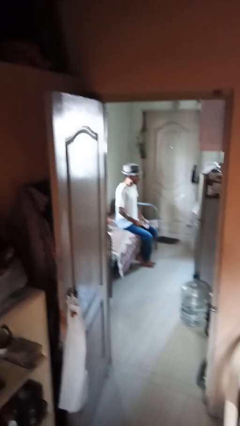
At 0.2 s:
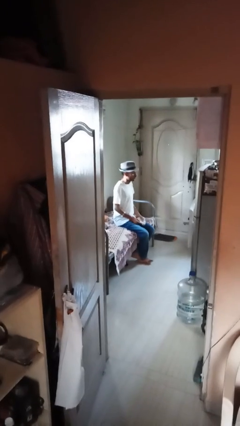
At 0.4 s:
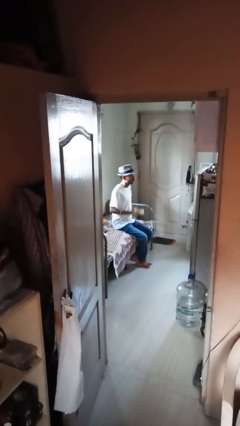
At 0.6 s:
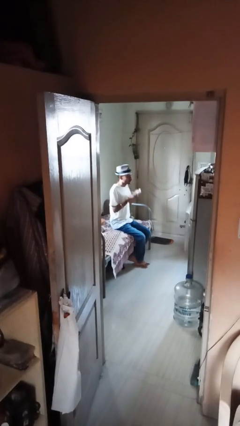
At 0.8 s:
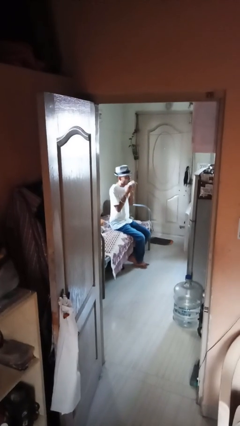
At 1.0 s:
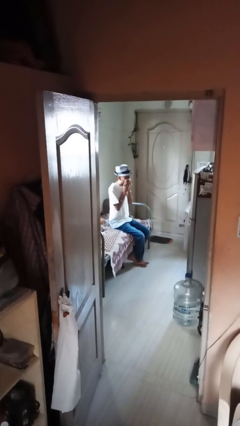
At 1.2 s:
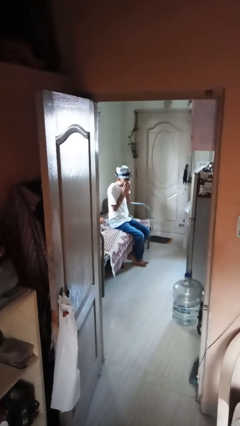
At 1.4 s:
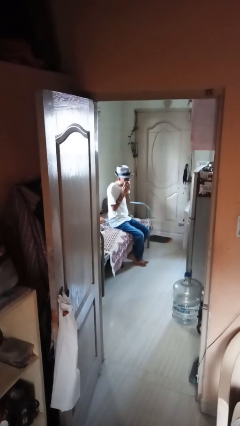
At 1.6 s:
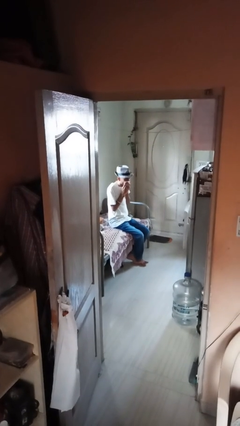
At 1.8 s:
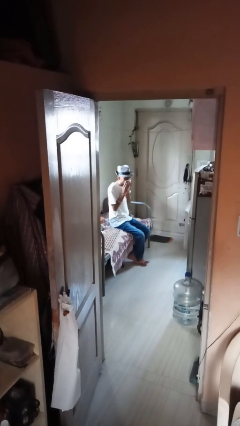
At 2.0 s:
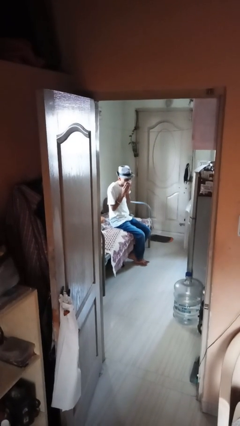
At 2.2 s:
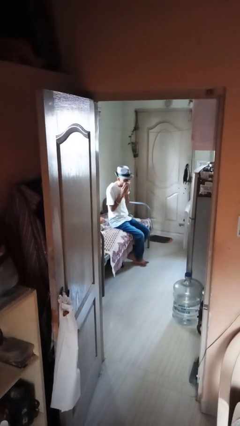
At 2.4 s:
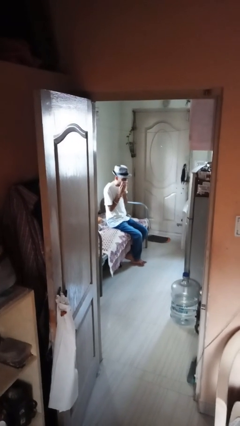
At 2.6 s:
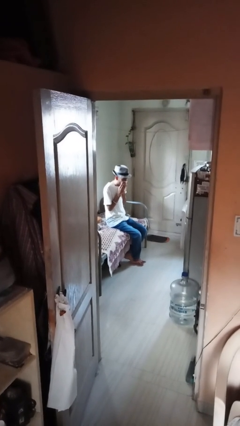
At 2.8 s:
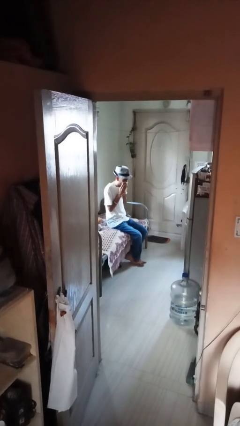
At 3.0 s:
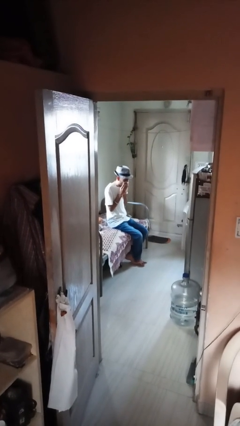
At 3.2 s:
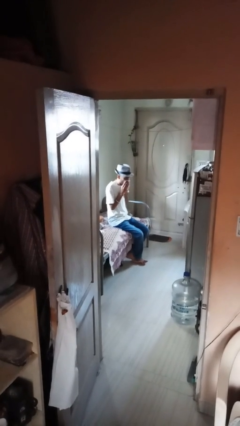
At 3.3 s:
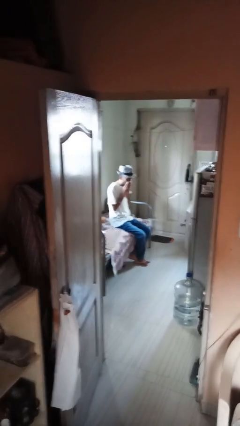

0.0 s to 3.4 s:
person blows nose

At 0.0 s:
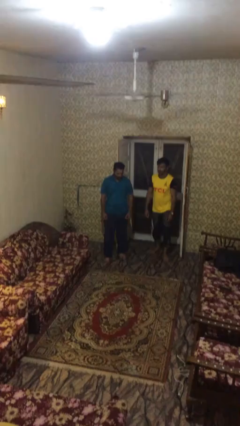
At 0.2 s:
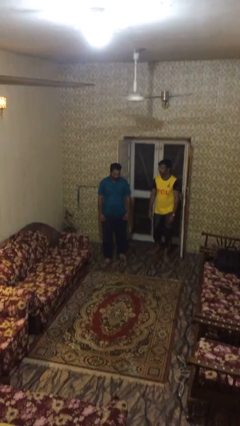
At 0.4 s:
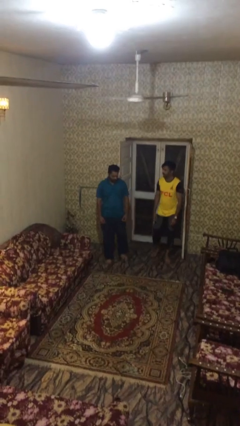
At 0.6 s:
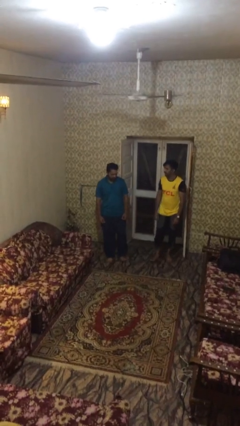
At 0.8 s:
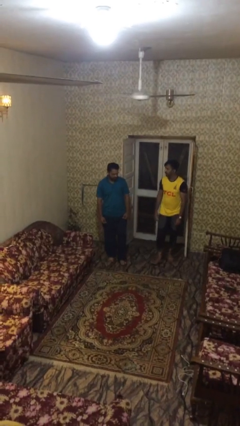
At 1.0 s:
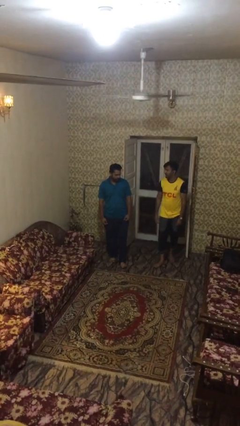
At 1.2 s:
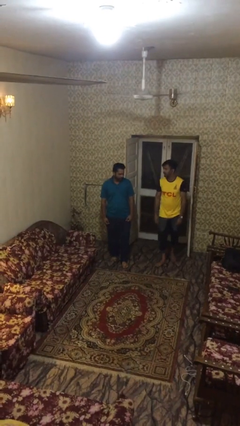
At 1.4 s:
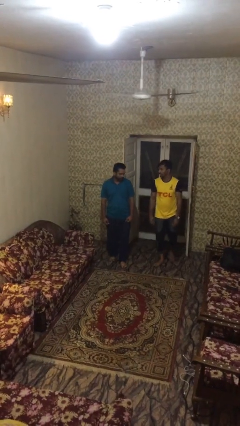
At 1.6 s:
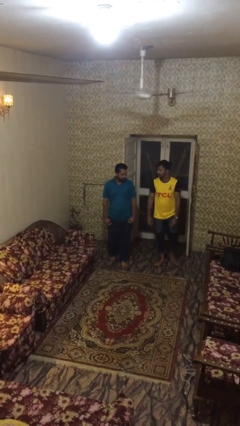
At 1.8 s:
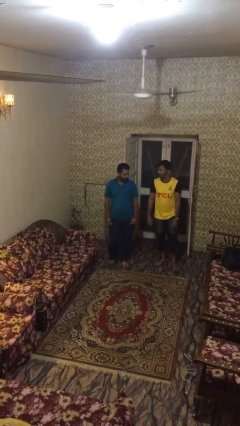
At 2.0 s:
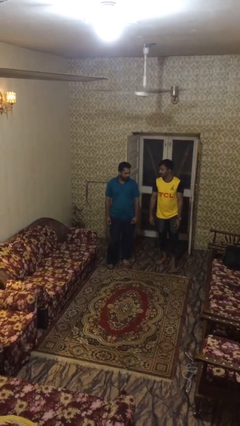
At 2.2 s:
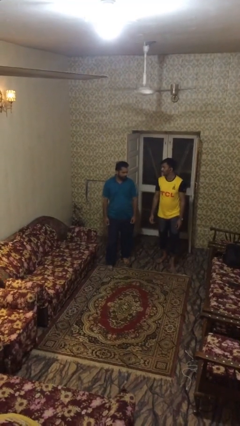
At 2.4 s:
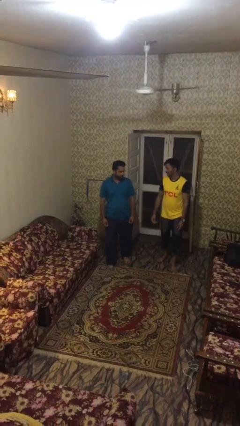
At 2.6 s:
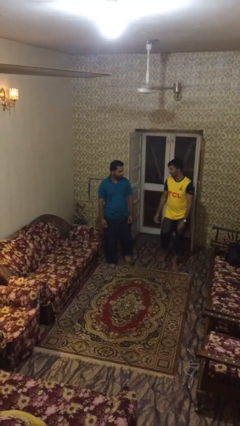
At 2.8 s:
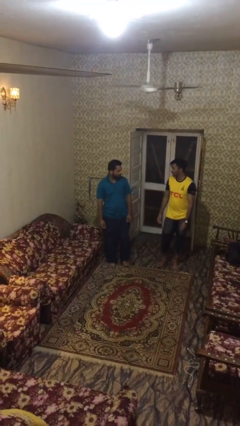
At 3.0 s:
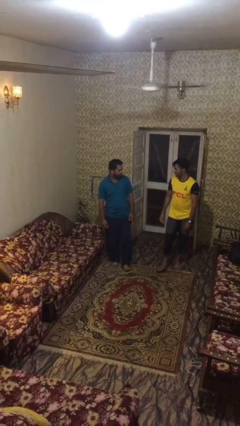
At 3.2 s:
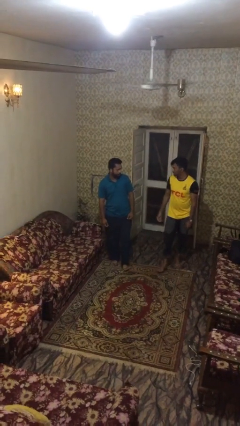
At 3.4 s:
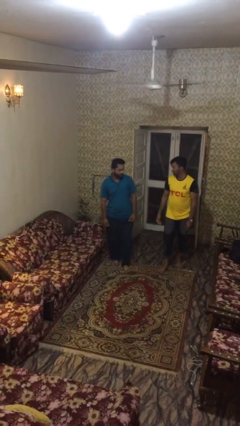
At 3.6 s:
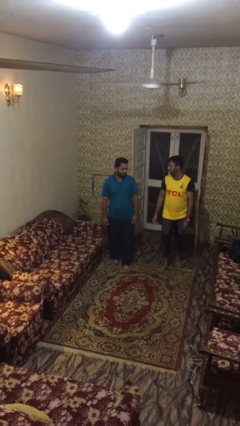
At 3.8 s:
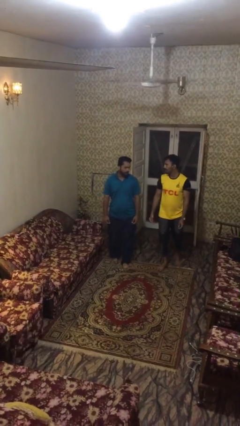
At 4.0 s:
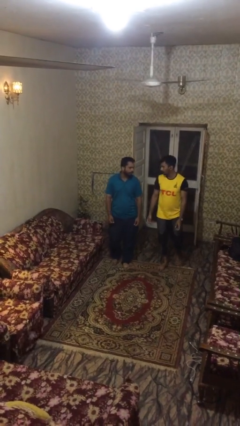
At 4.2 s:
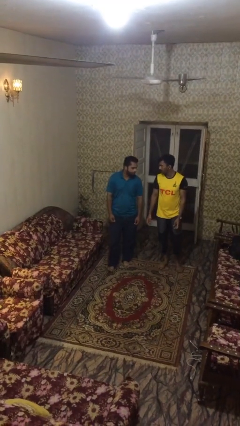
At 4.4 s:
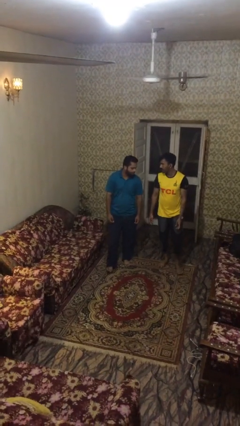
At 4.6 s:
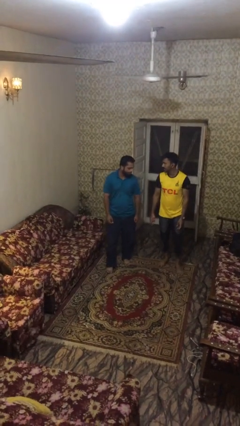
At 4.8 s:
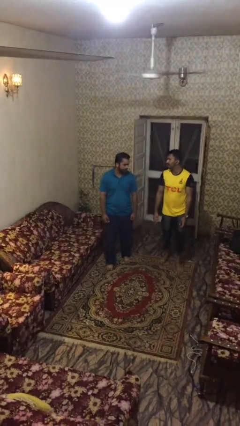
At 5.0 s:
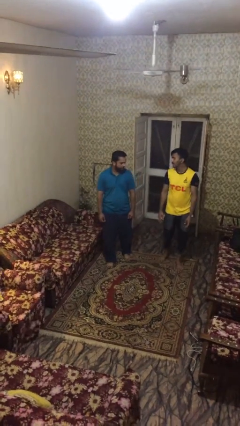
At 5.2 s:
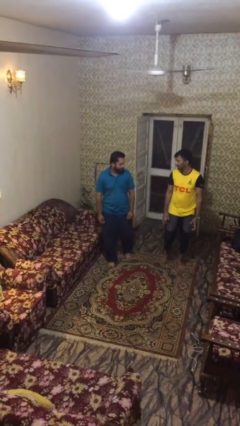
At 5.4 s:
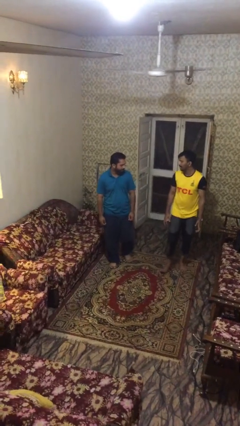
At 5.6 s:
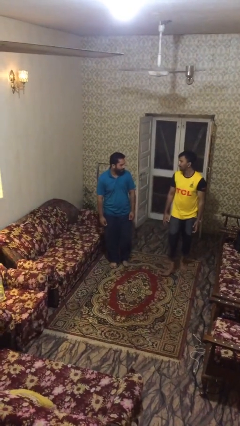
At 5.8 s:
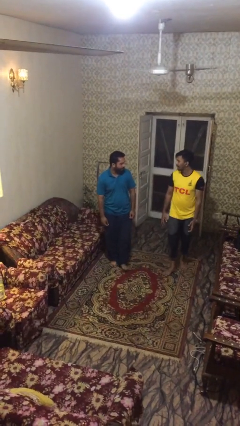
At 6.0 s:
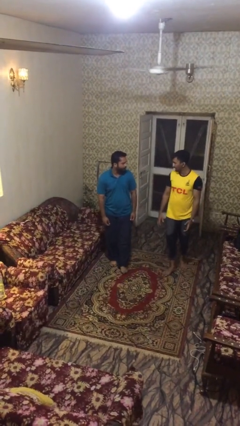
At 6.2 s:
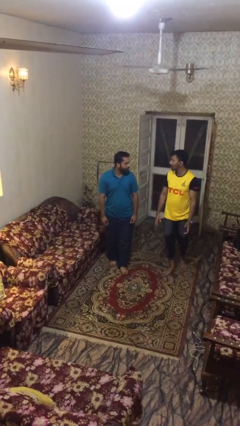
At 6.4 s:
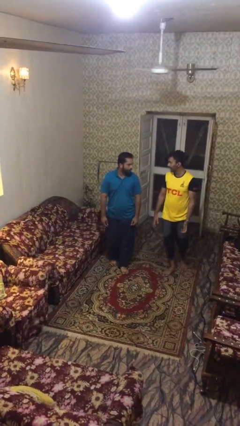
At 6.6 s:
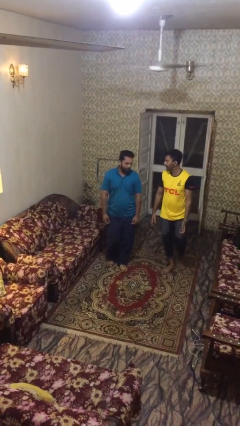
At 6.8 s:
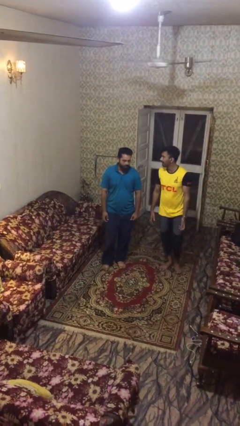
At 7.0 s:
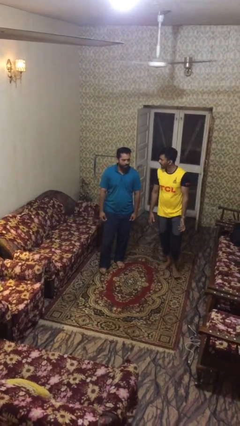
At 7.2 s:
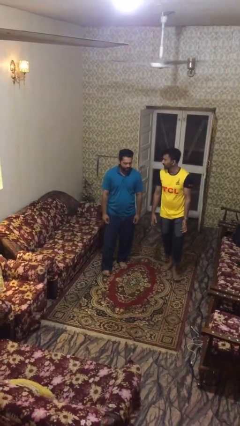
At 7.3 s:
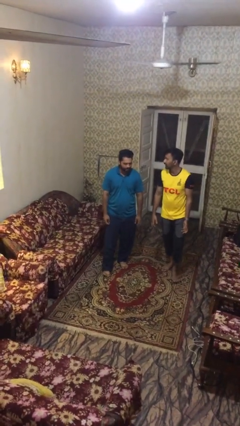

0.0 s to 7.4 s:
person talks to person

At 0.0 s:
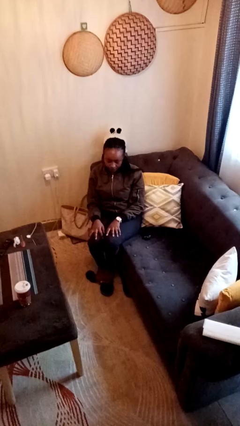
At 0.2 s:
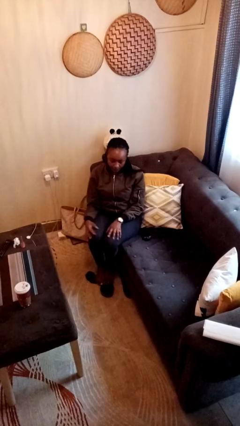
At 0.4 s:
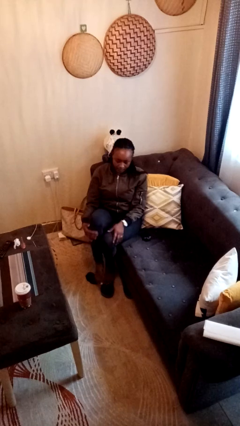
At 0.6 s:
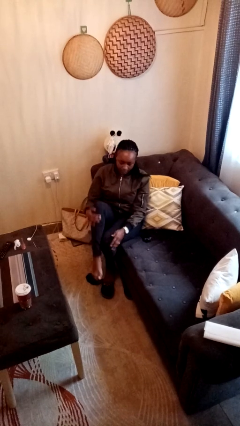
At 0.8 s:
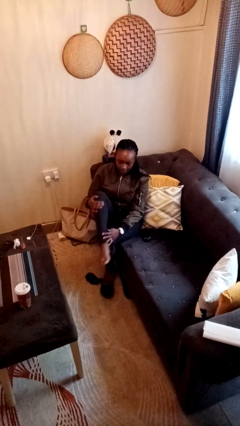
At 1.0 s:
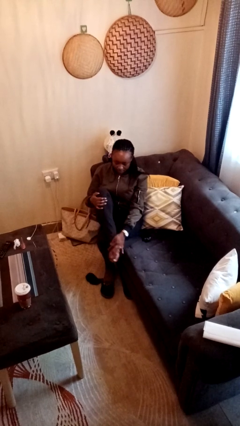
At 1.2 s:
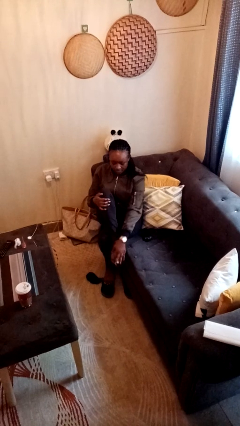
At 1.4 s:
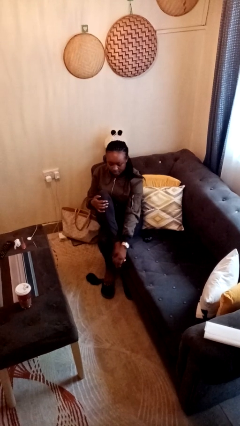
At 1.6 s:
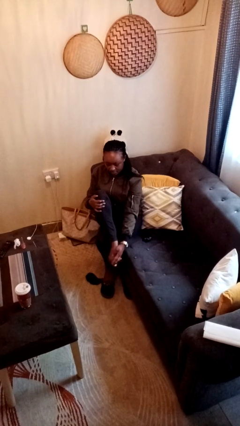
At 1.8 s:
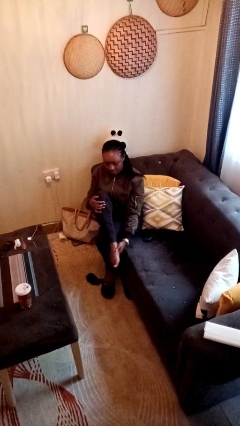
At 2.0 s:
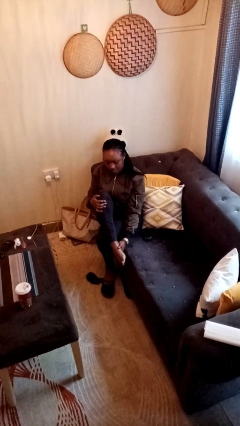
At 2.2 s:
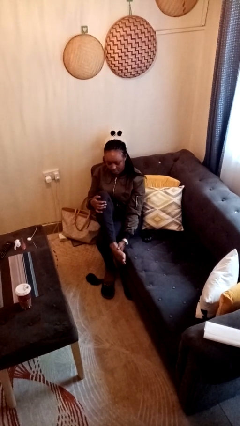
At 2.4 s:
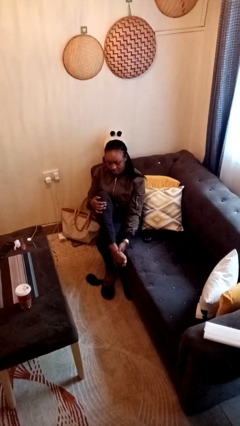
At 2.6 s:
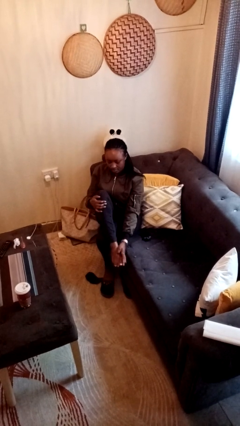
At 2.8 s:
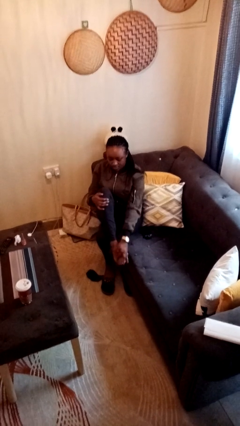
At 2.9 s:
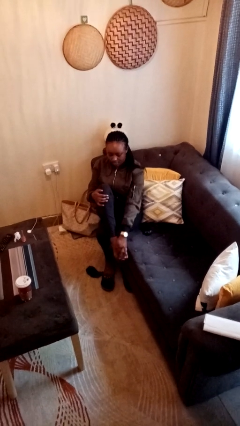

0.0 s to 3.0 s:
person rubs foot

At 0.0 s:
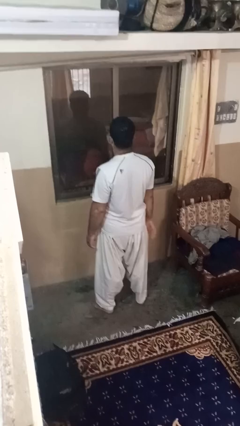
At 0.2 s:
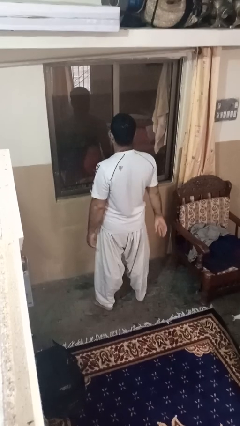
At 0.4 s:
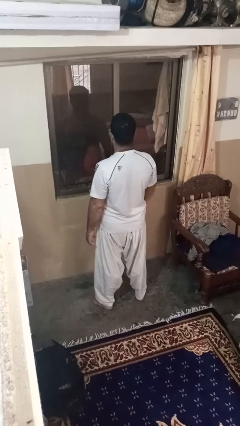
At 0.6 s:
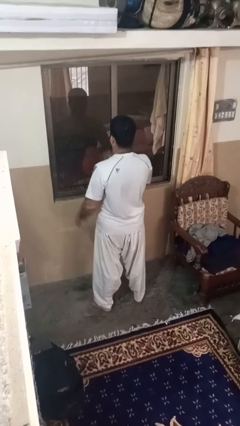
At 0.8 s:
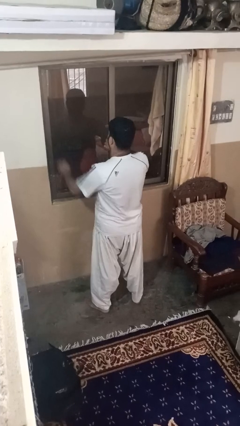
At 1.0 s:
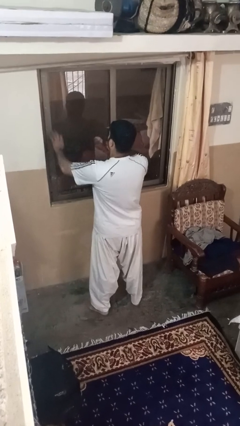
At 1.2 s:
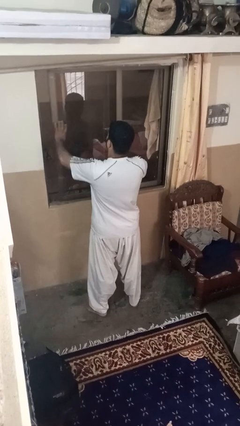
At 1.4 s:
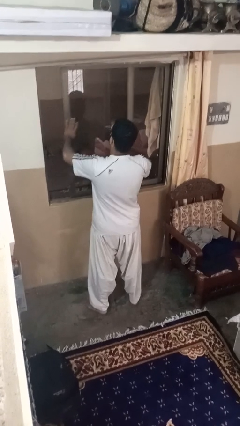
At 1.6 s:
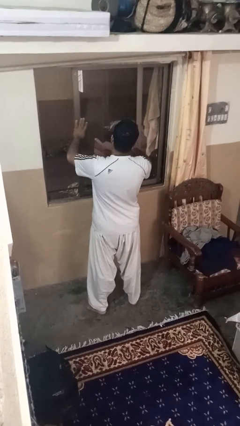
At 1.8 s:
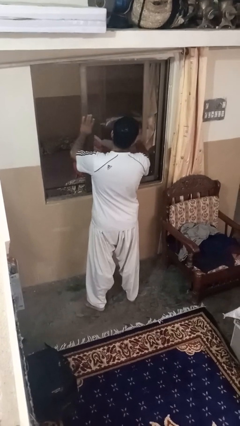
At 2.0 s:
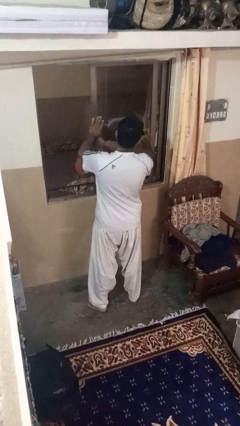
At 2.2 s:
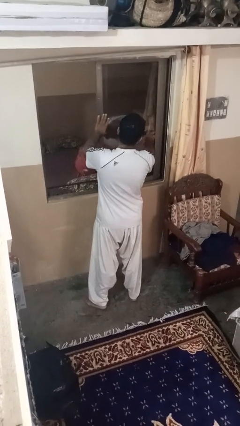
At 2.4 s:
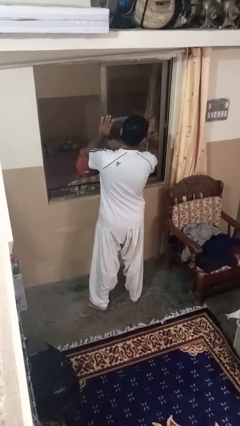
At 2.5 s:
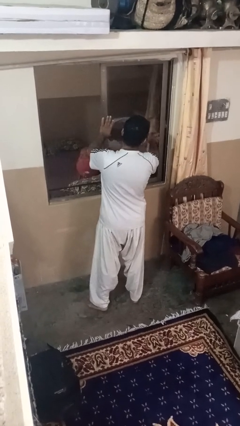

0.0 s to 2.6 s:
person opens home window

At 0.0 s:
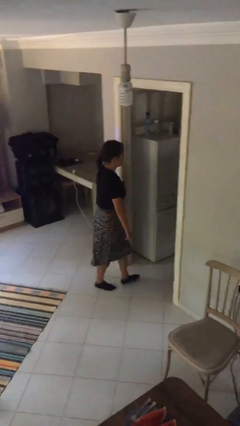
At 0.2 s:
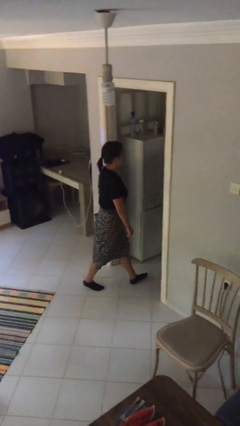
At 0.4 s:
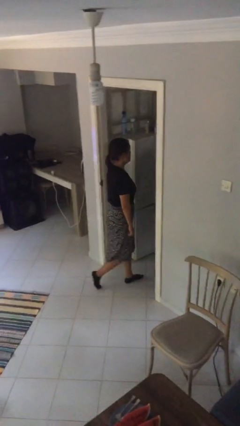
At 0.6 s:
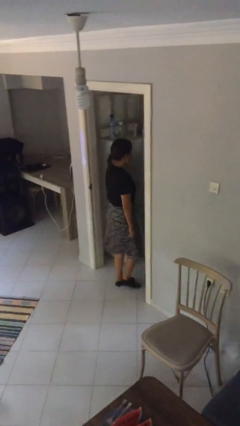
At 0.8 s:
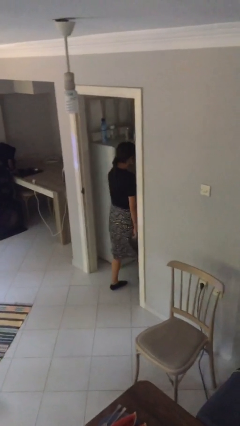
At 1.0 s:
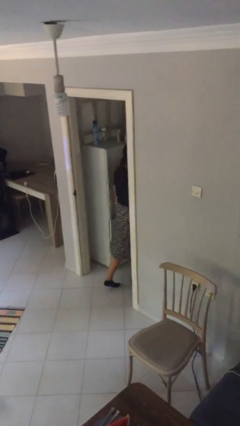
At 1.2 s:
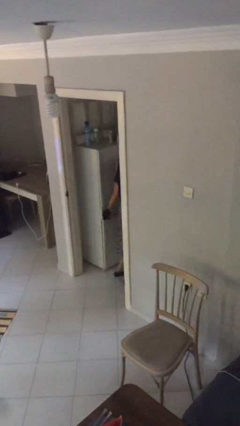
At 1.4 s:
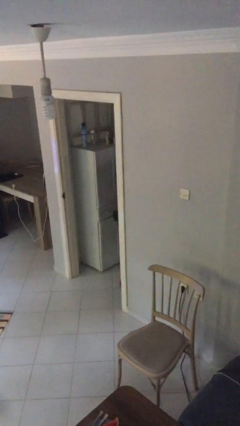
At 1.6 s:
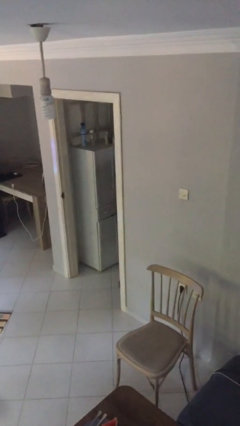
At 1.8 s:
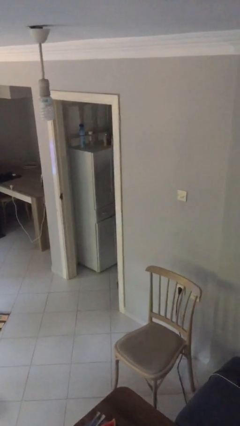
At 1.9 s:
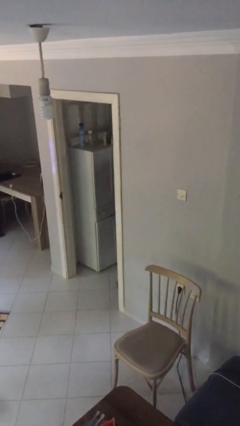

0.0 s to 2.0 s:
person exits scene through structure
